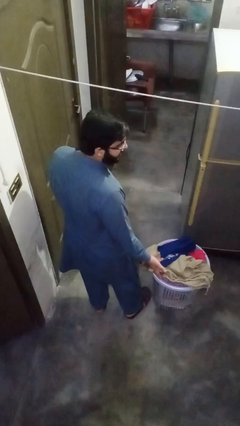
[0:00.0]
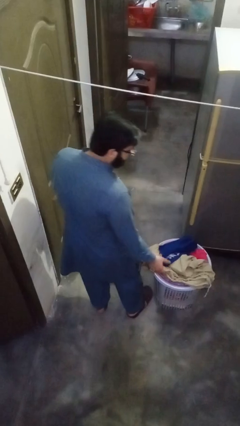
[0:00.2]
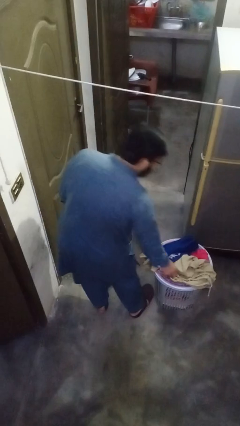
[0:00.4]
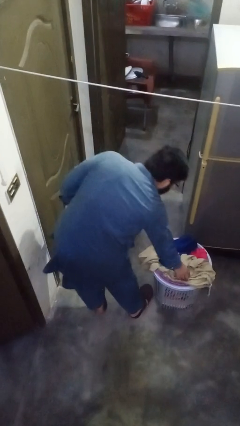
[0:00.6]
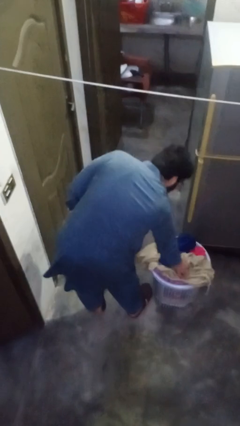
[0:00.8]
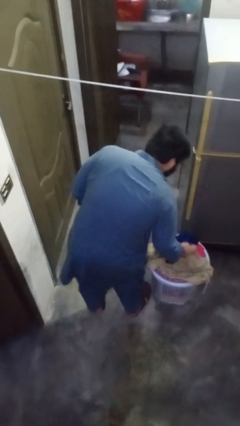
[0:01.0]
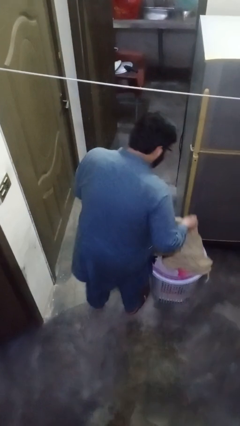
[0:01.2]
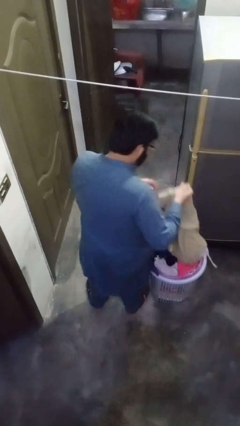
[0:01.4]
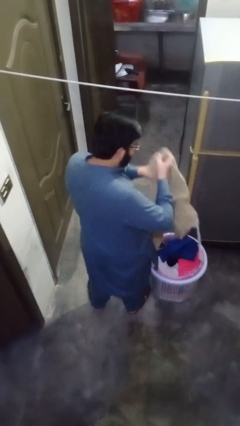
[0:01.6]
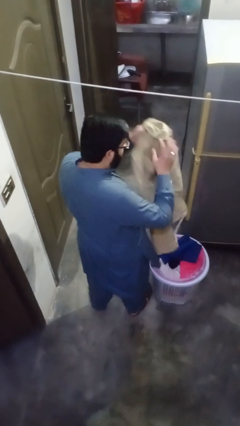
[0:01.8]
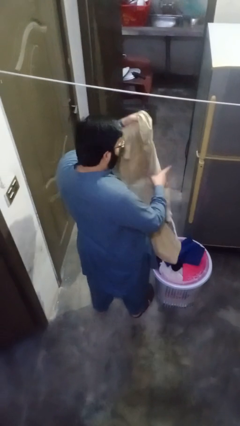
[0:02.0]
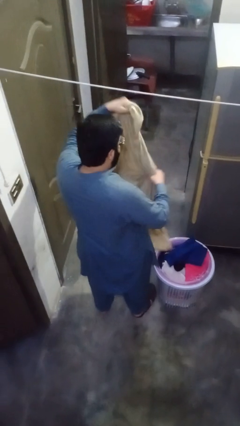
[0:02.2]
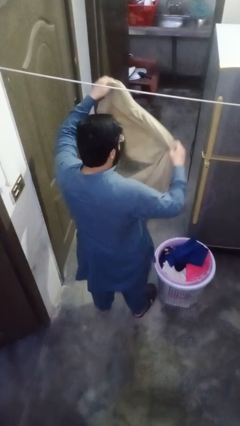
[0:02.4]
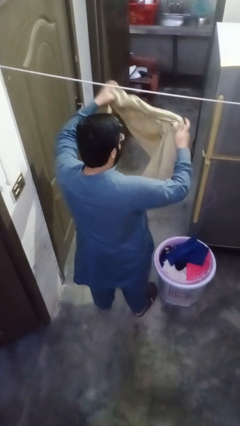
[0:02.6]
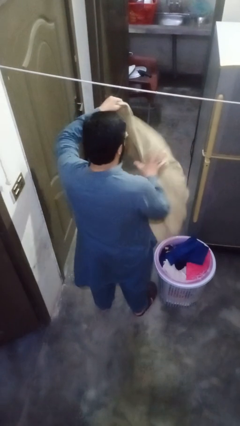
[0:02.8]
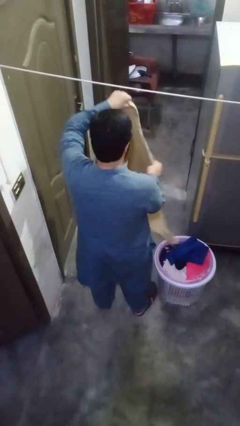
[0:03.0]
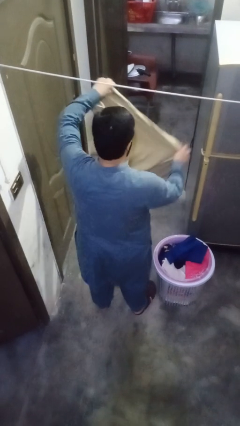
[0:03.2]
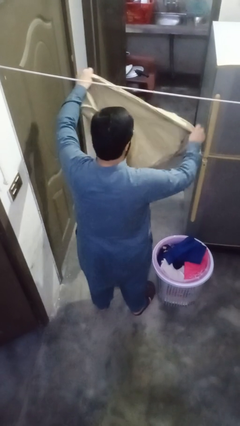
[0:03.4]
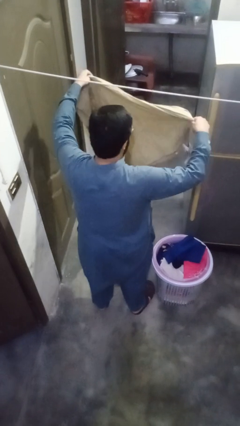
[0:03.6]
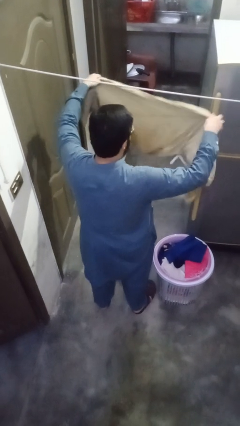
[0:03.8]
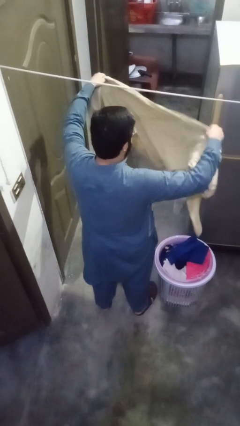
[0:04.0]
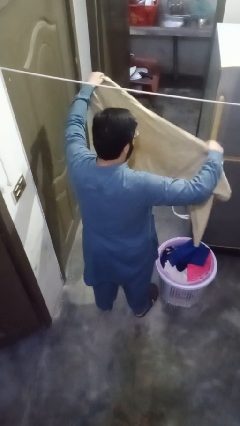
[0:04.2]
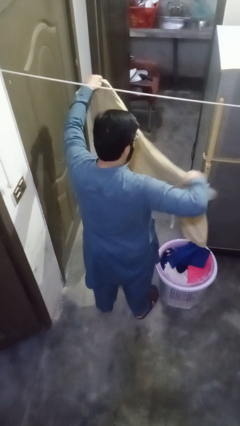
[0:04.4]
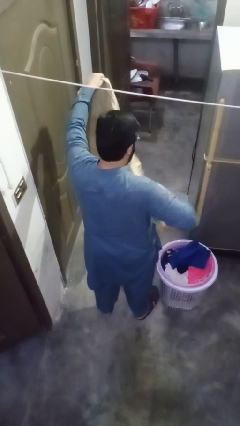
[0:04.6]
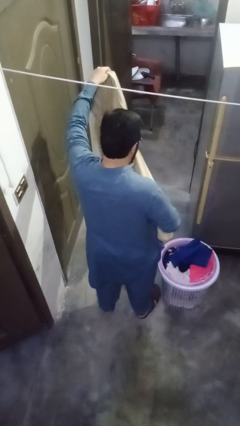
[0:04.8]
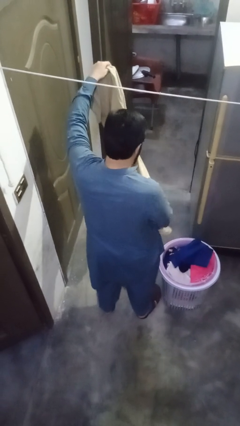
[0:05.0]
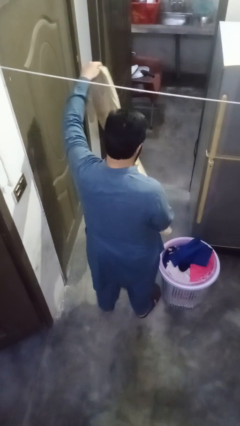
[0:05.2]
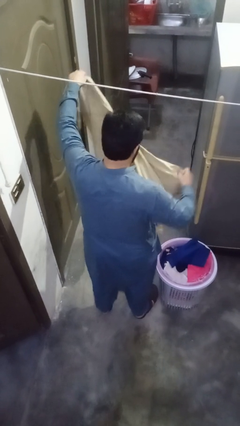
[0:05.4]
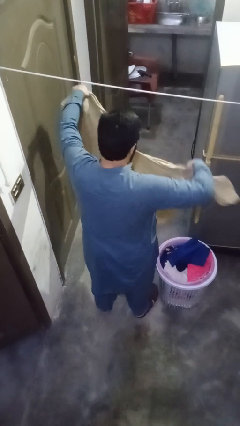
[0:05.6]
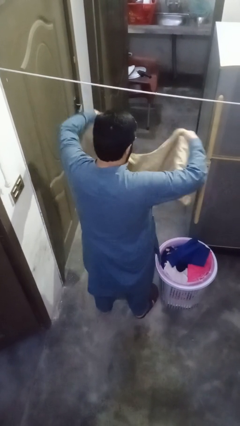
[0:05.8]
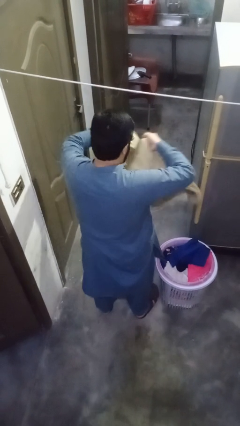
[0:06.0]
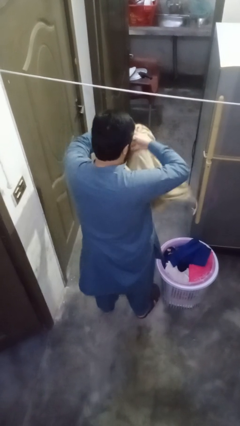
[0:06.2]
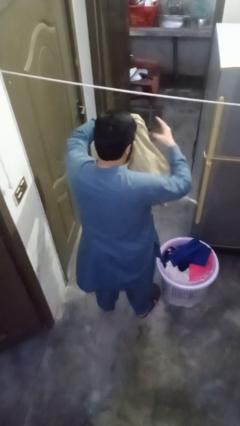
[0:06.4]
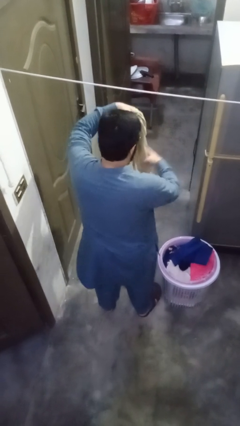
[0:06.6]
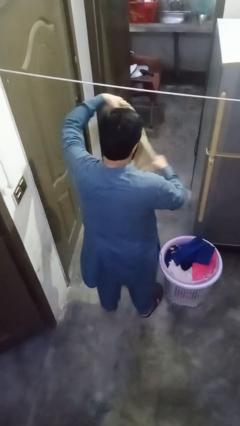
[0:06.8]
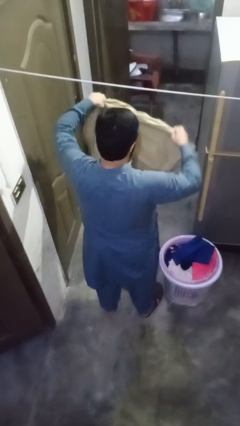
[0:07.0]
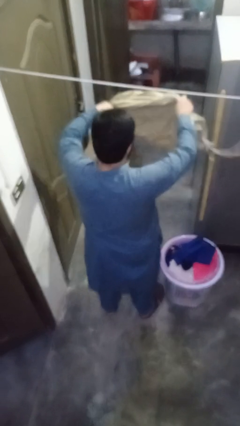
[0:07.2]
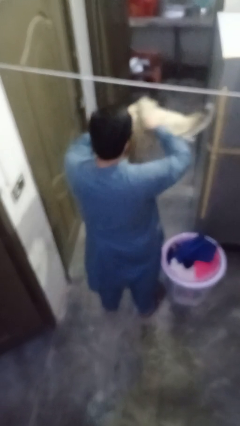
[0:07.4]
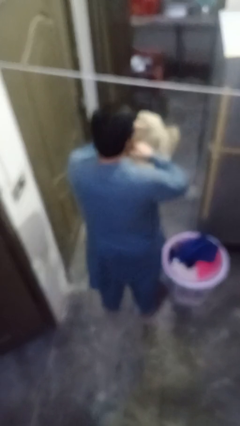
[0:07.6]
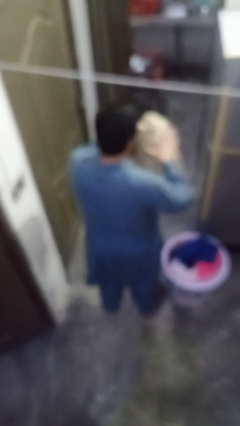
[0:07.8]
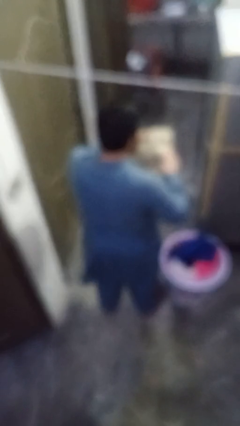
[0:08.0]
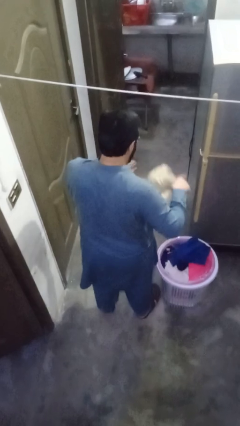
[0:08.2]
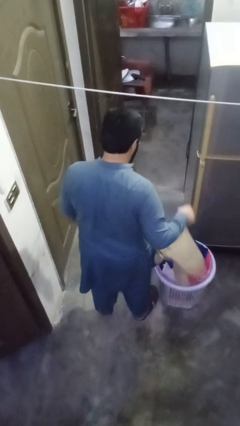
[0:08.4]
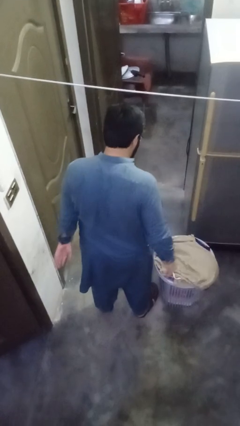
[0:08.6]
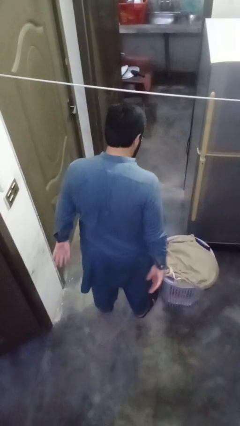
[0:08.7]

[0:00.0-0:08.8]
person folds pants

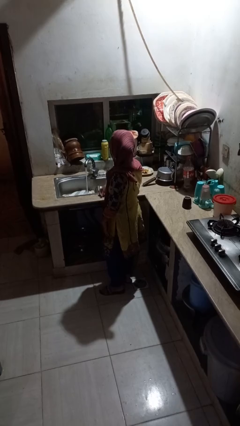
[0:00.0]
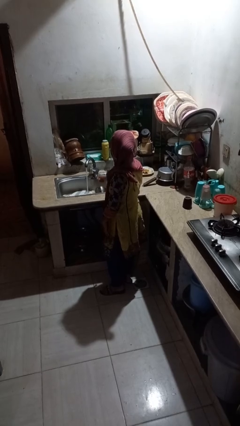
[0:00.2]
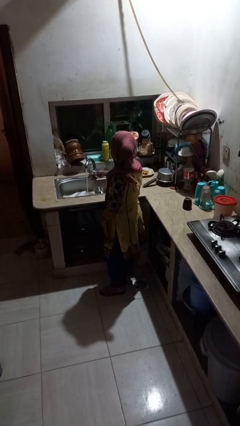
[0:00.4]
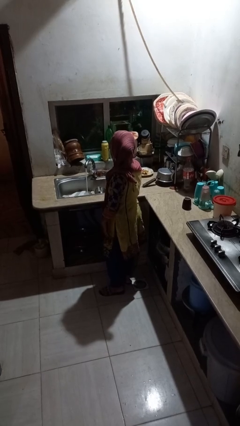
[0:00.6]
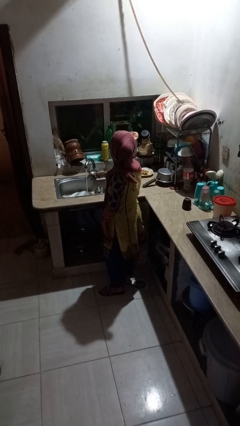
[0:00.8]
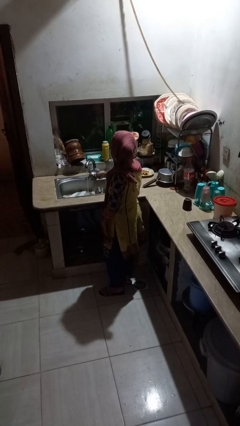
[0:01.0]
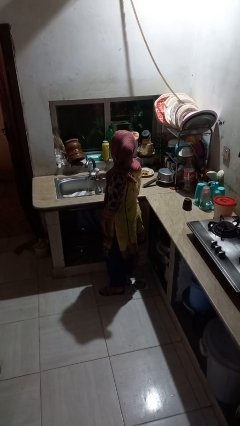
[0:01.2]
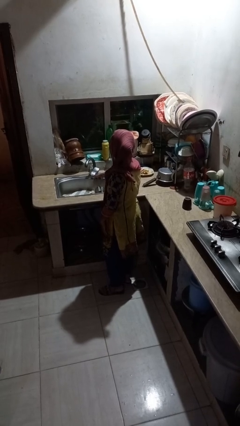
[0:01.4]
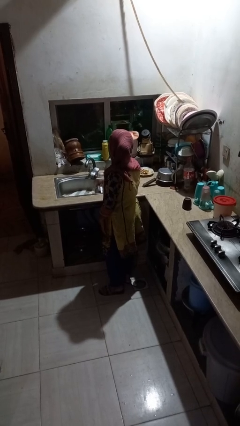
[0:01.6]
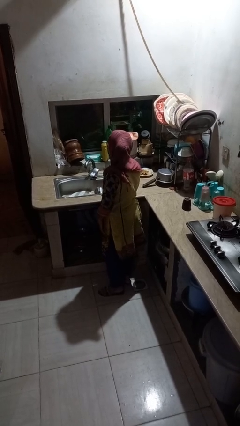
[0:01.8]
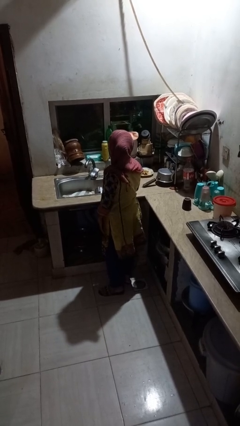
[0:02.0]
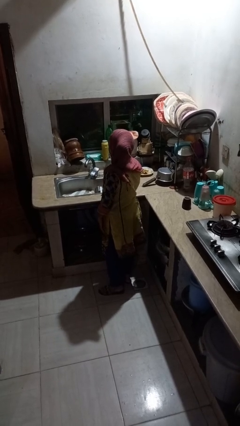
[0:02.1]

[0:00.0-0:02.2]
person turns off faucet

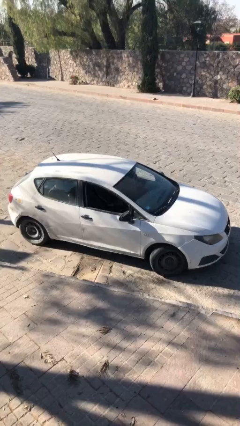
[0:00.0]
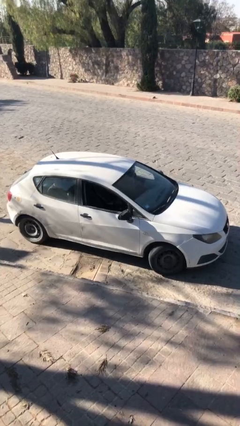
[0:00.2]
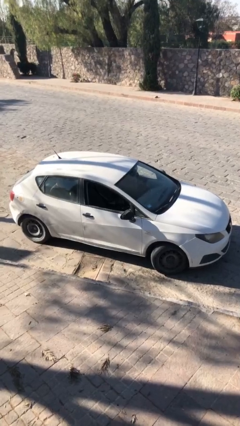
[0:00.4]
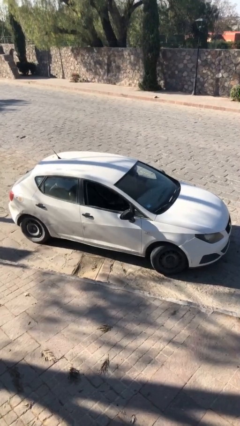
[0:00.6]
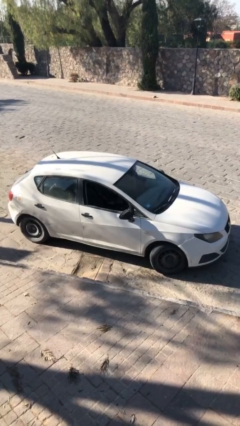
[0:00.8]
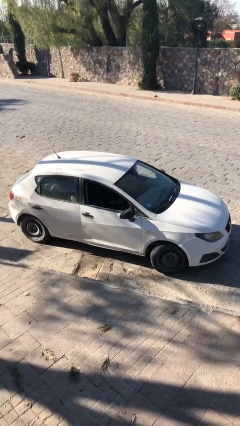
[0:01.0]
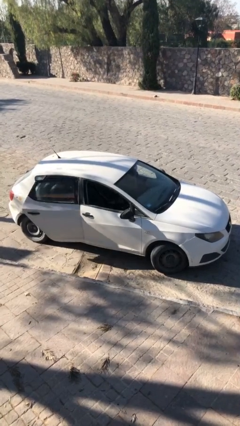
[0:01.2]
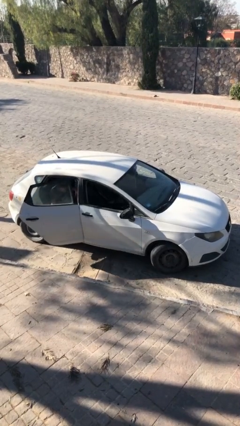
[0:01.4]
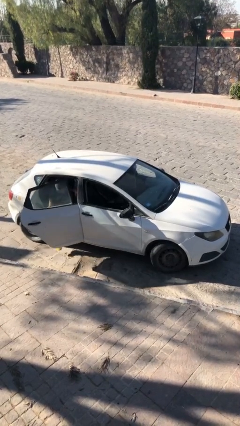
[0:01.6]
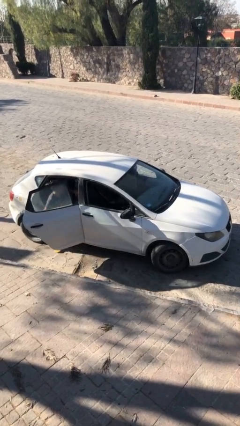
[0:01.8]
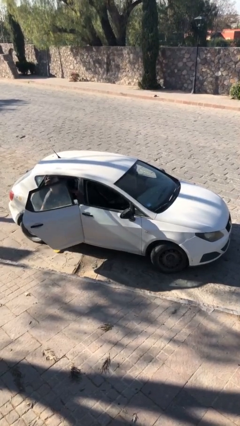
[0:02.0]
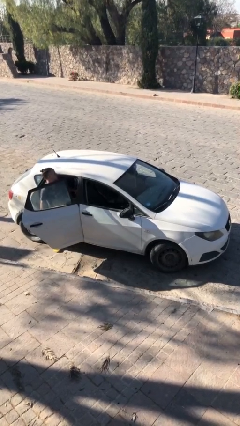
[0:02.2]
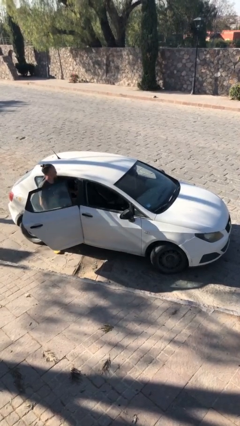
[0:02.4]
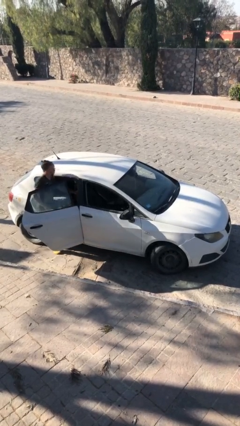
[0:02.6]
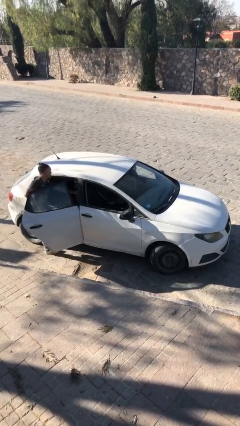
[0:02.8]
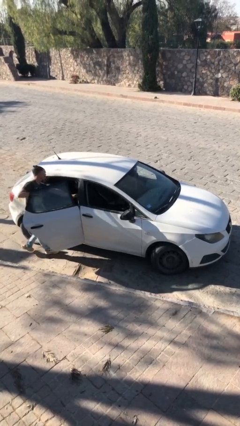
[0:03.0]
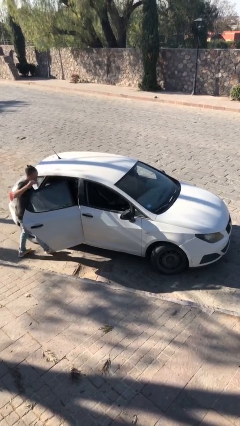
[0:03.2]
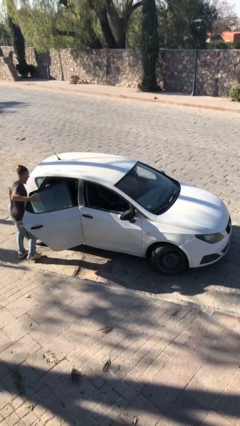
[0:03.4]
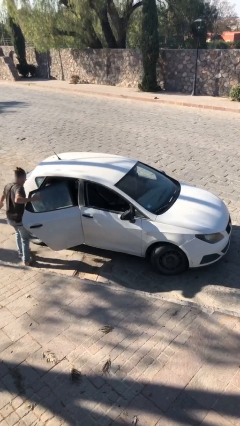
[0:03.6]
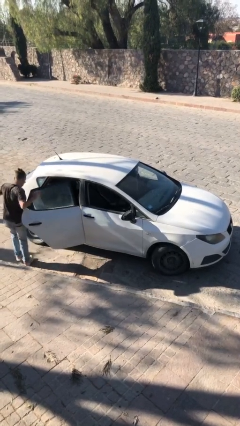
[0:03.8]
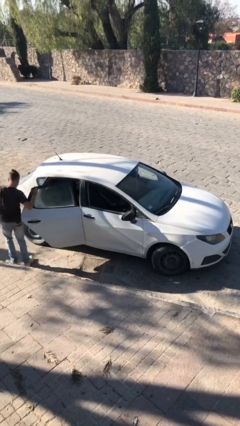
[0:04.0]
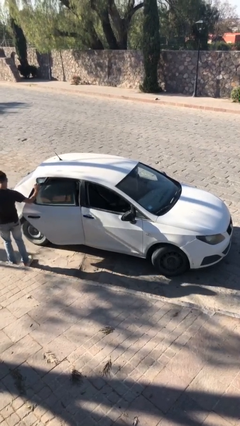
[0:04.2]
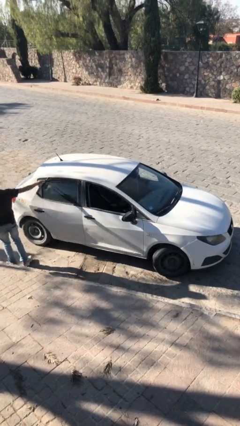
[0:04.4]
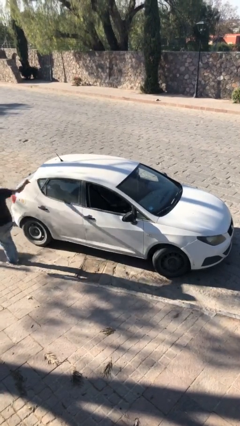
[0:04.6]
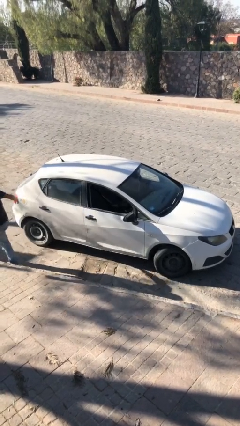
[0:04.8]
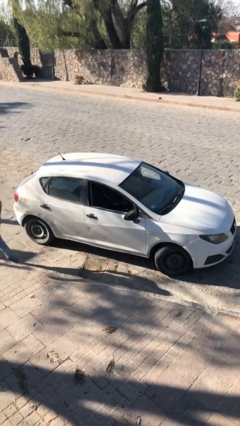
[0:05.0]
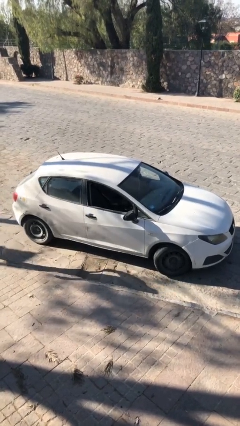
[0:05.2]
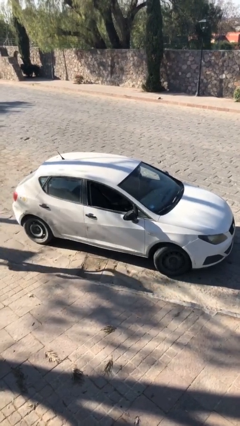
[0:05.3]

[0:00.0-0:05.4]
car drops off person

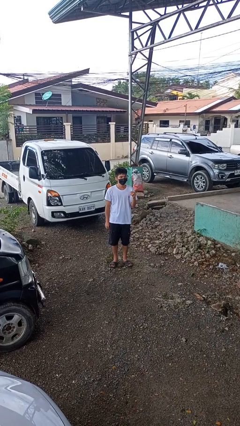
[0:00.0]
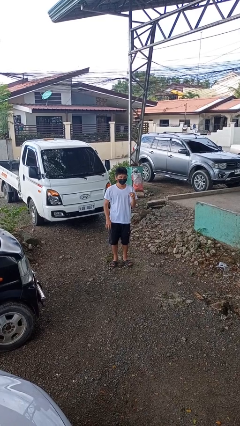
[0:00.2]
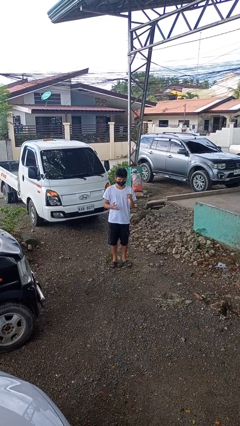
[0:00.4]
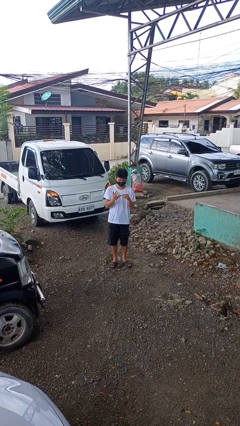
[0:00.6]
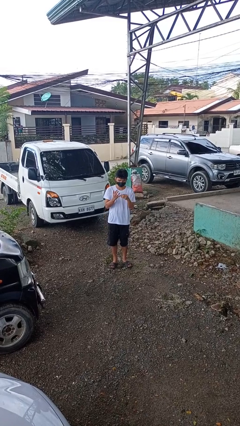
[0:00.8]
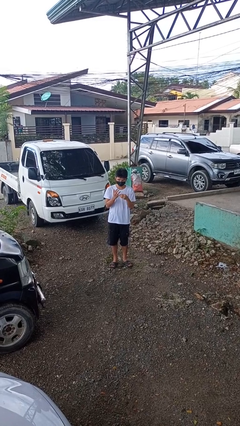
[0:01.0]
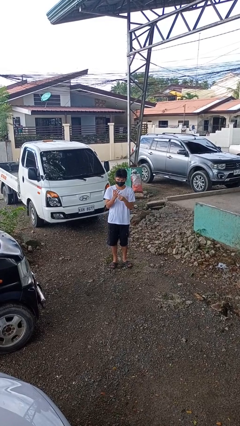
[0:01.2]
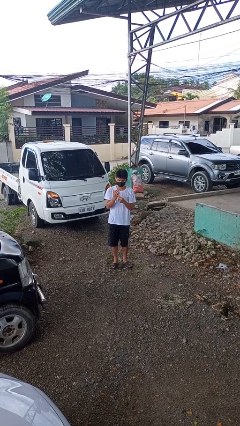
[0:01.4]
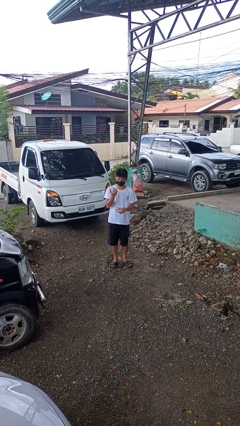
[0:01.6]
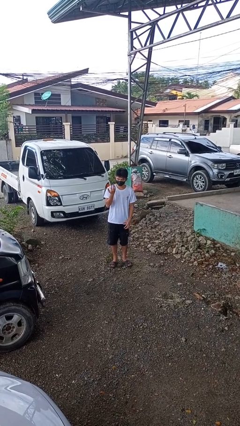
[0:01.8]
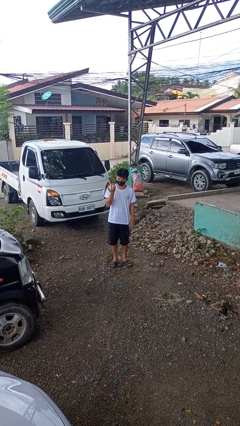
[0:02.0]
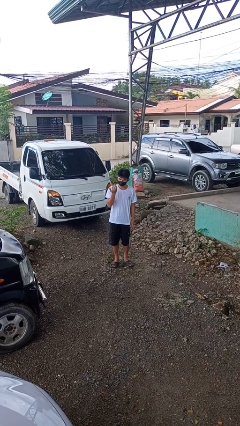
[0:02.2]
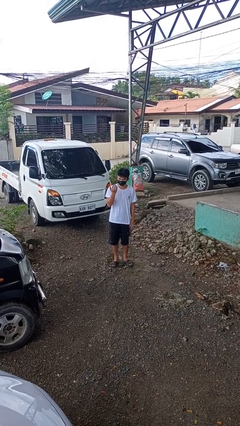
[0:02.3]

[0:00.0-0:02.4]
person puts on ring
